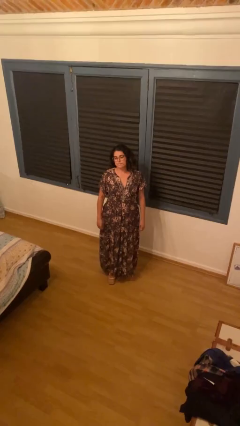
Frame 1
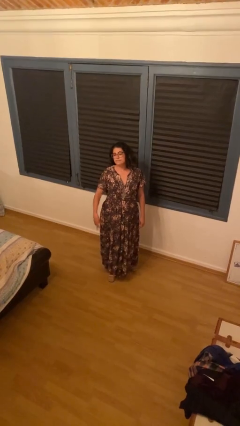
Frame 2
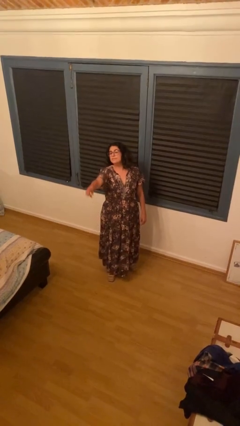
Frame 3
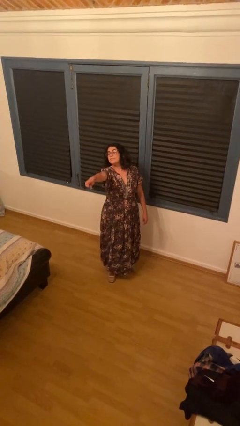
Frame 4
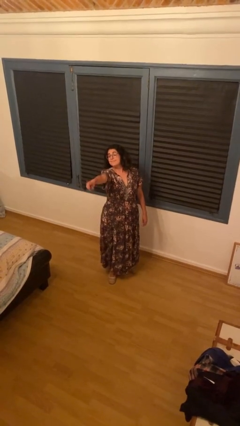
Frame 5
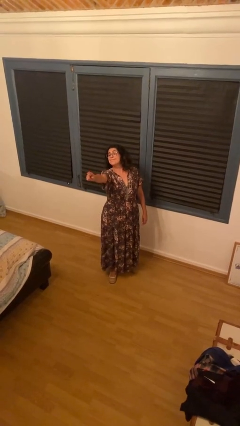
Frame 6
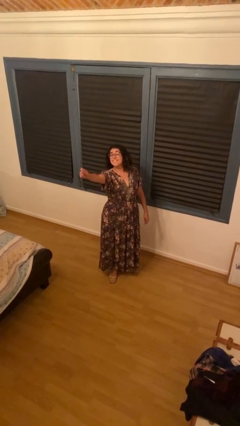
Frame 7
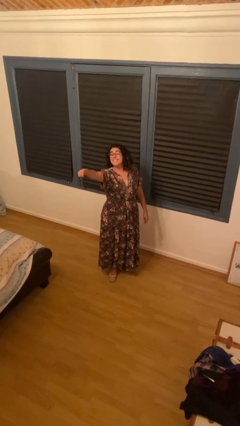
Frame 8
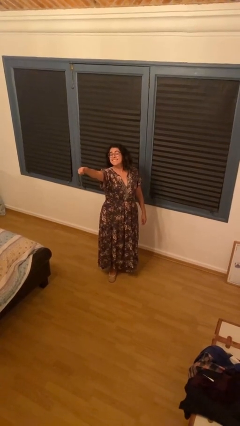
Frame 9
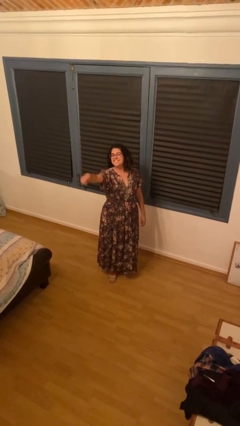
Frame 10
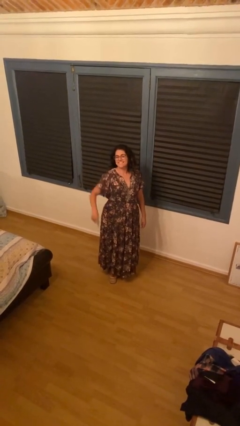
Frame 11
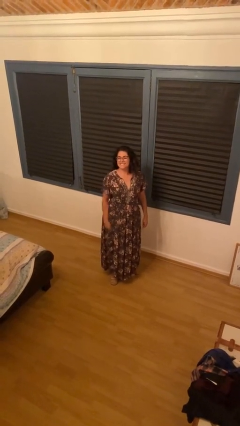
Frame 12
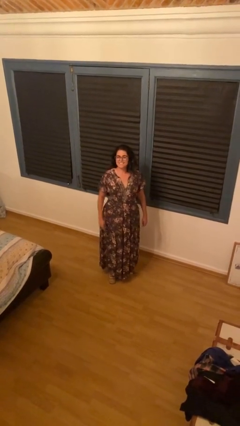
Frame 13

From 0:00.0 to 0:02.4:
person points at person

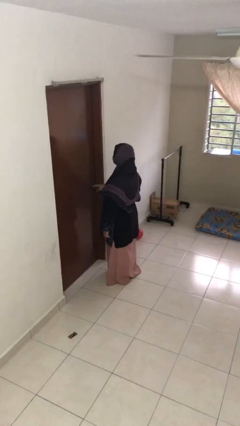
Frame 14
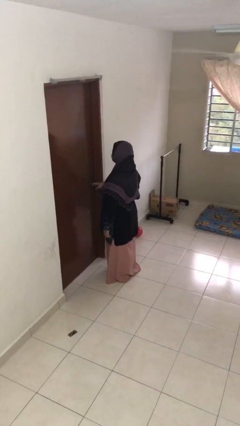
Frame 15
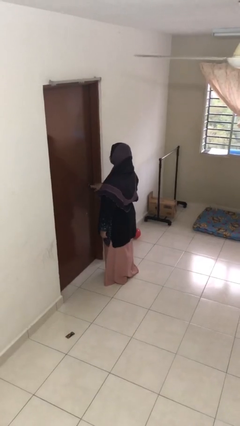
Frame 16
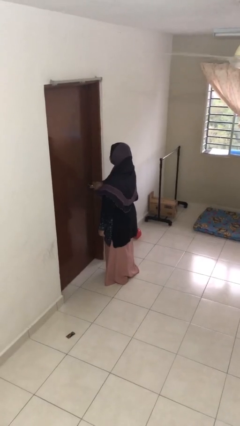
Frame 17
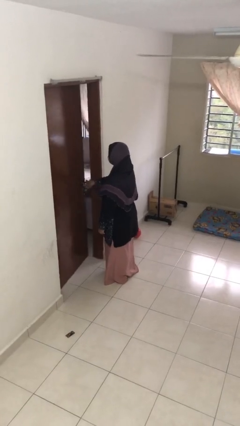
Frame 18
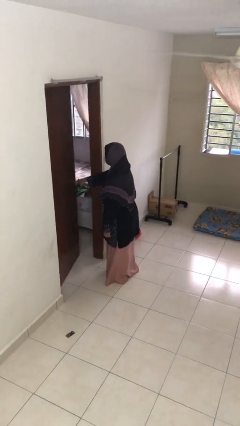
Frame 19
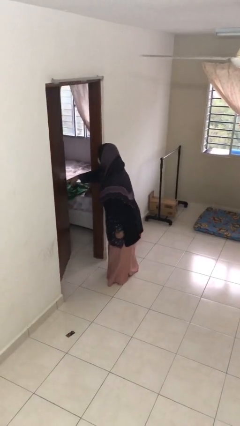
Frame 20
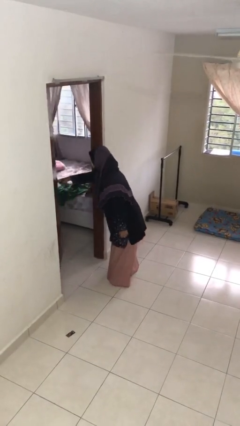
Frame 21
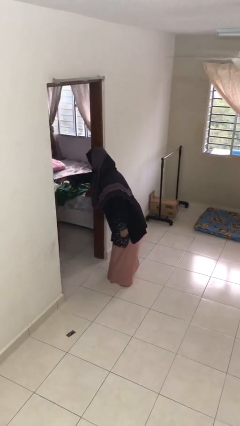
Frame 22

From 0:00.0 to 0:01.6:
person opens facility door

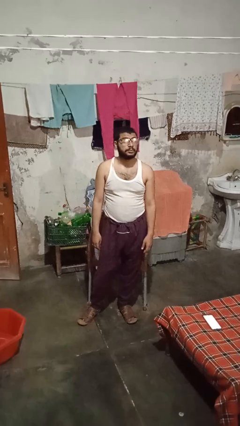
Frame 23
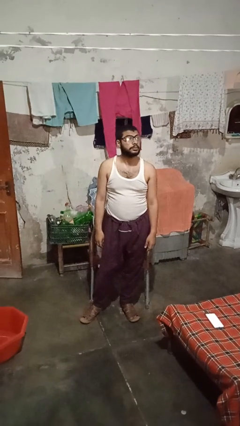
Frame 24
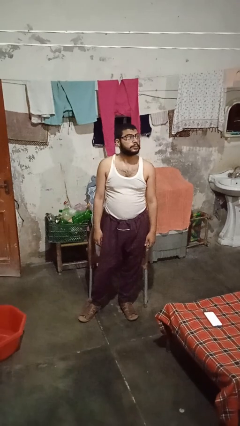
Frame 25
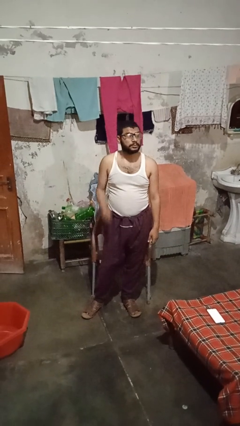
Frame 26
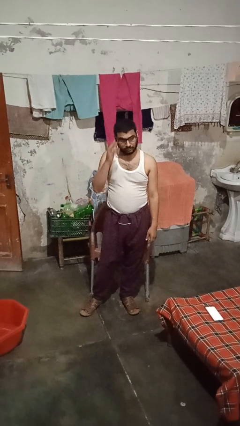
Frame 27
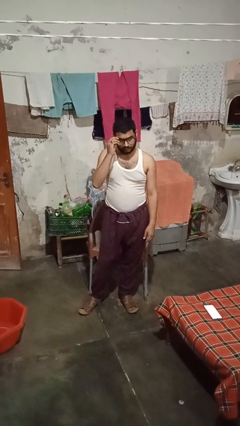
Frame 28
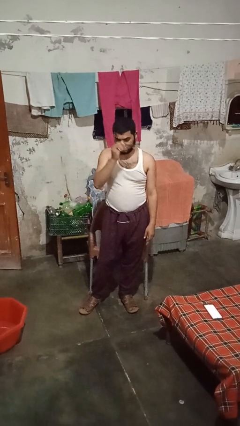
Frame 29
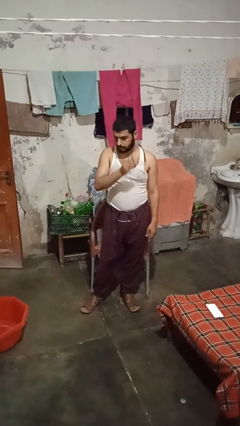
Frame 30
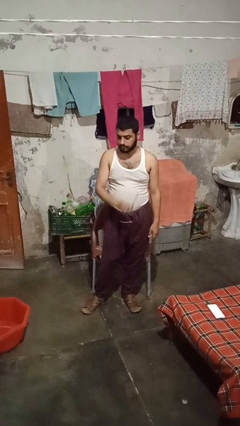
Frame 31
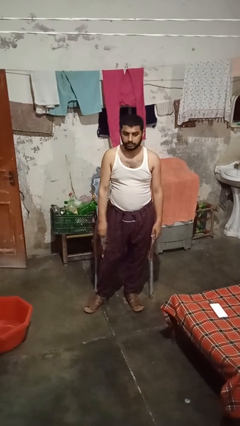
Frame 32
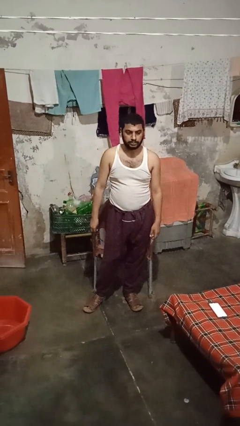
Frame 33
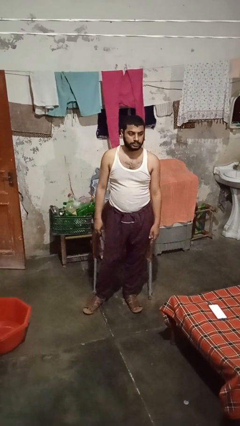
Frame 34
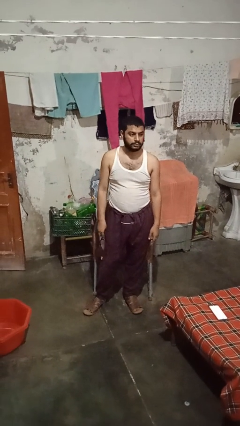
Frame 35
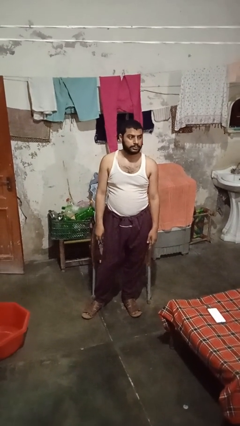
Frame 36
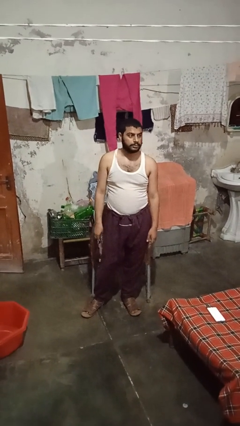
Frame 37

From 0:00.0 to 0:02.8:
person takes off glasses

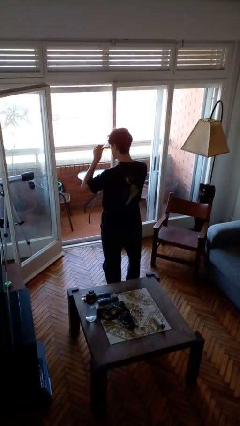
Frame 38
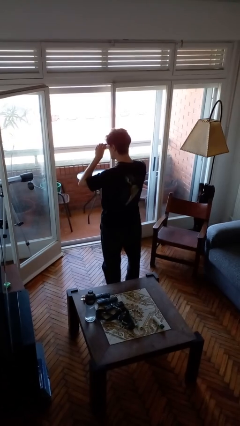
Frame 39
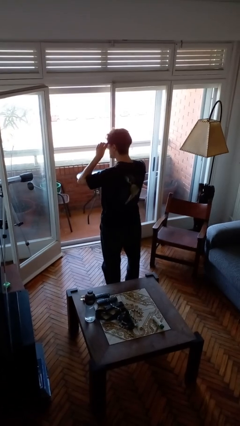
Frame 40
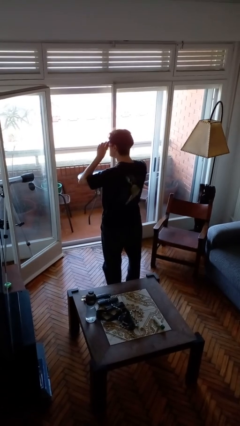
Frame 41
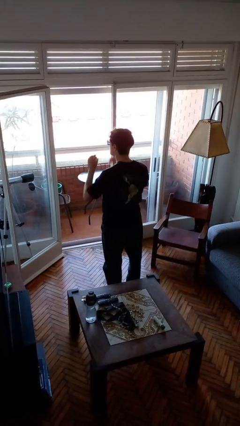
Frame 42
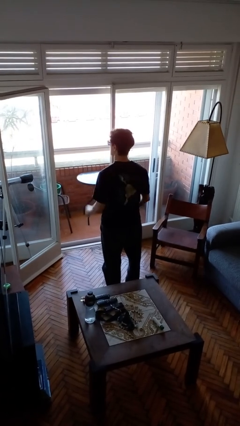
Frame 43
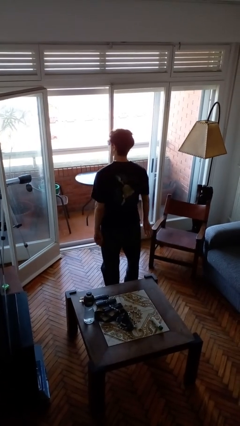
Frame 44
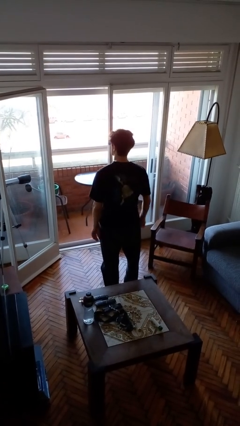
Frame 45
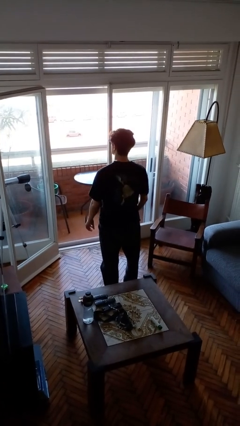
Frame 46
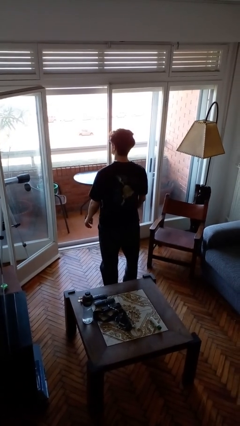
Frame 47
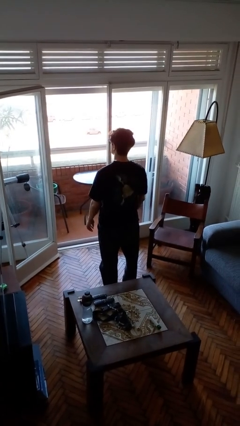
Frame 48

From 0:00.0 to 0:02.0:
person puts on sunglasses

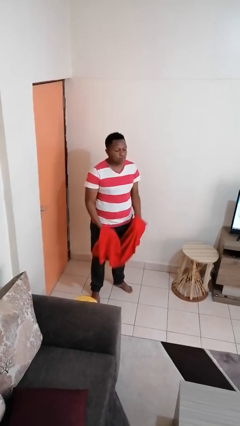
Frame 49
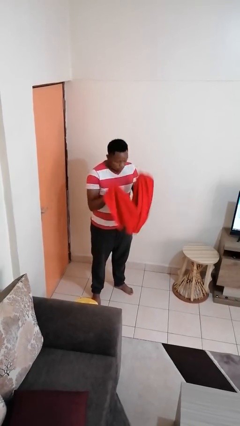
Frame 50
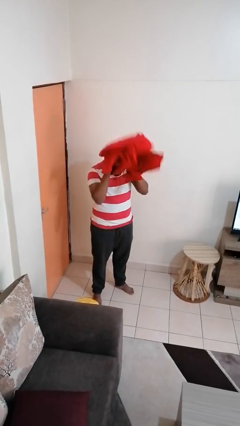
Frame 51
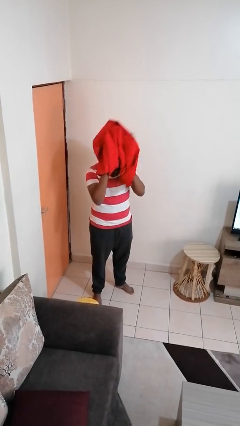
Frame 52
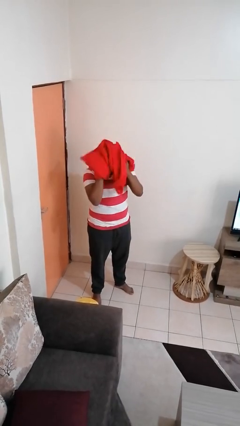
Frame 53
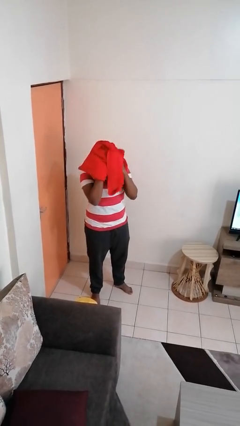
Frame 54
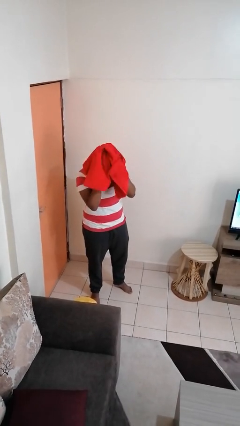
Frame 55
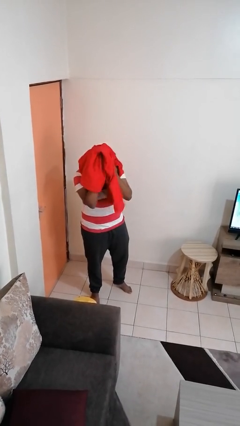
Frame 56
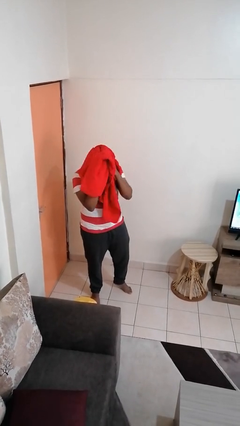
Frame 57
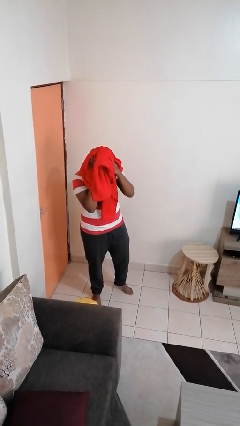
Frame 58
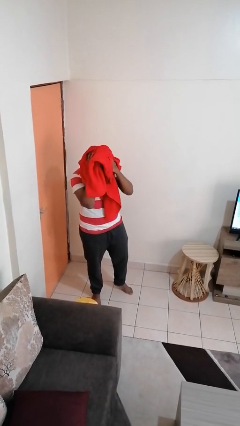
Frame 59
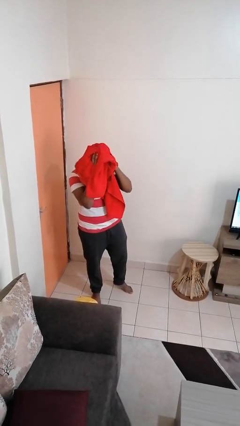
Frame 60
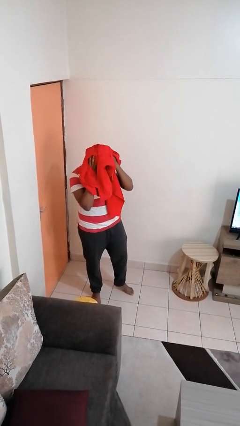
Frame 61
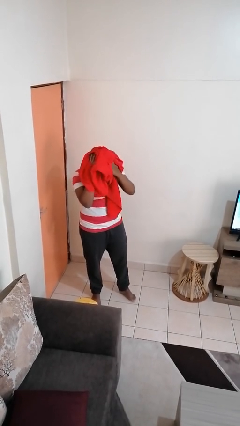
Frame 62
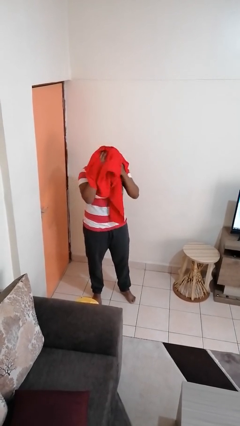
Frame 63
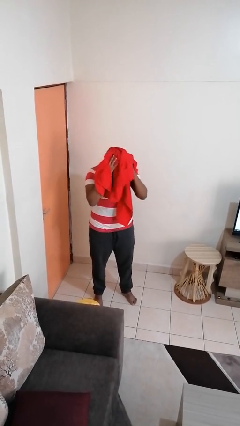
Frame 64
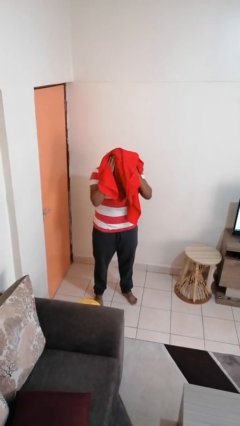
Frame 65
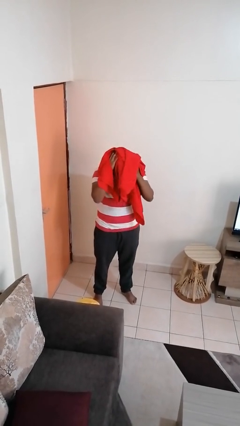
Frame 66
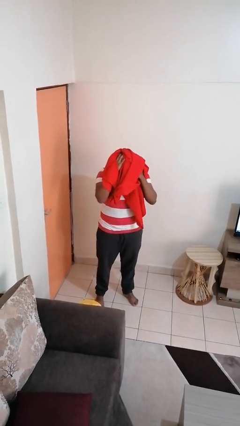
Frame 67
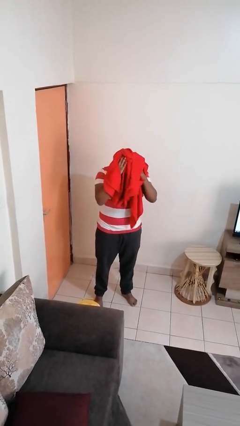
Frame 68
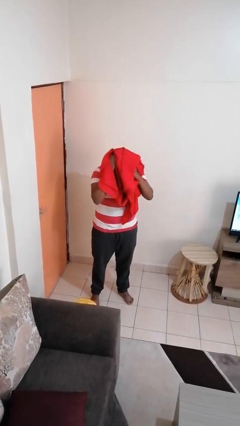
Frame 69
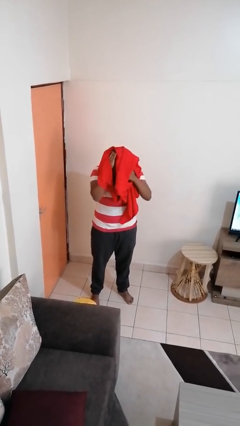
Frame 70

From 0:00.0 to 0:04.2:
person dries hair with towel

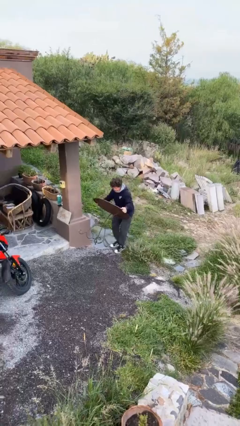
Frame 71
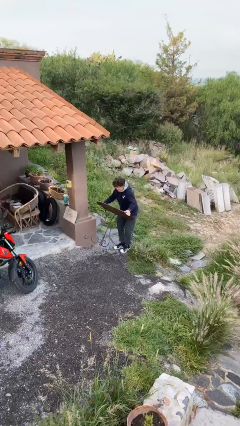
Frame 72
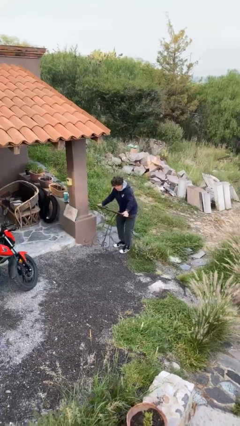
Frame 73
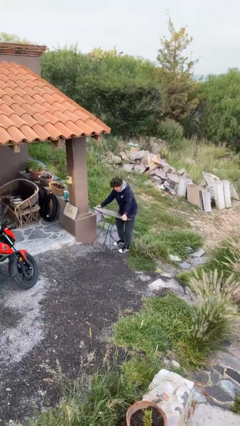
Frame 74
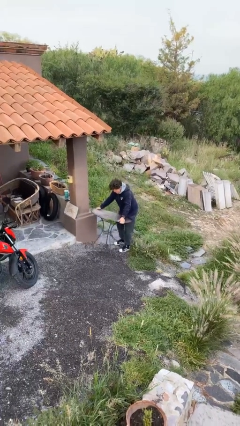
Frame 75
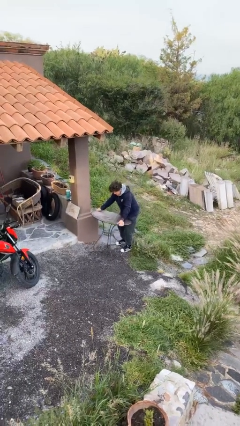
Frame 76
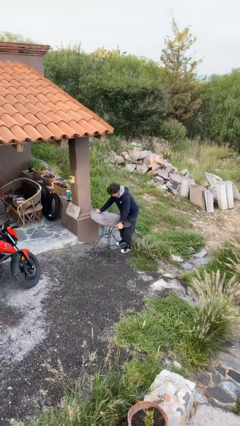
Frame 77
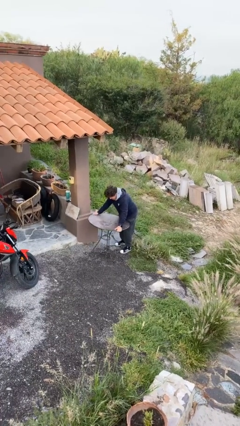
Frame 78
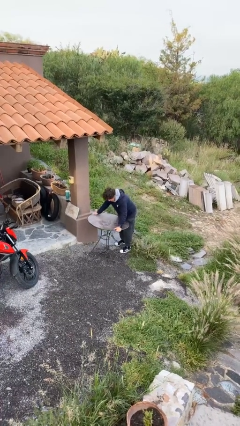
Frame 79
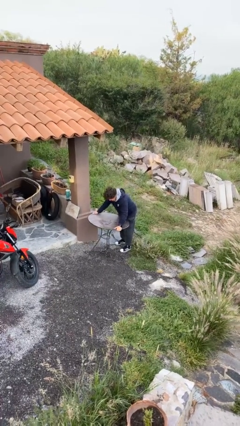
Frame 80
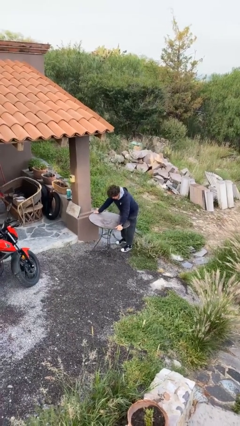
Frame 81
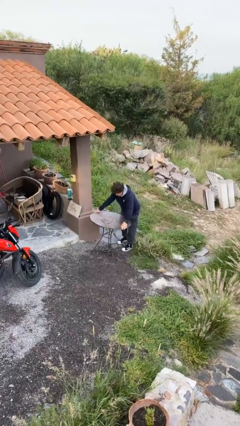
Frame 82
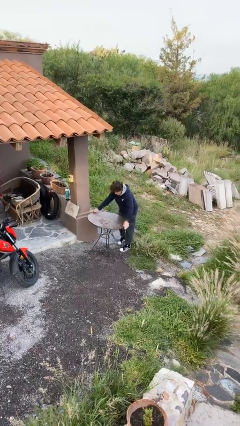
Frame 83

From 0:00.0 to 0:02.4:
person puts down object on floor

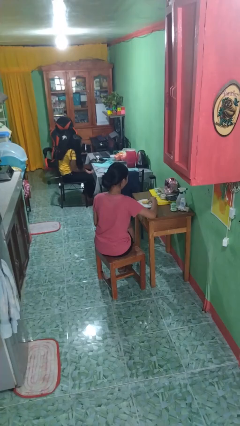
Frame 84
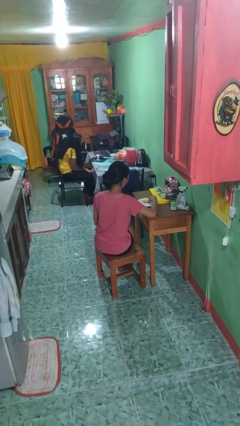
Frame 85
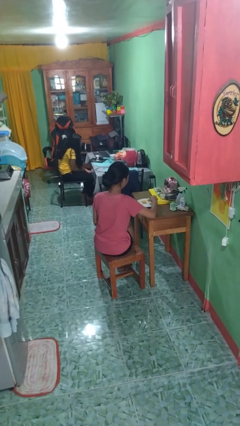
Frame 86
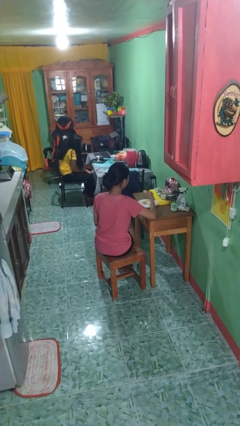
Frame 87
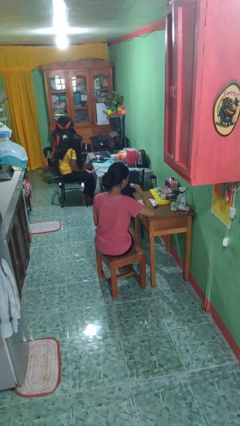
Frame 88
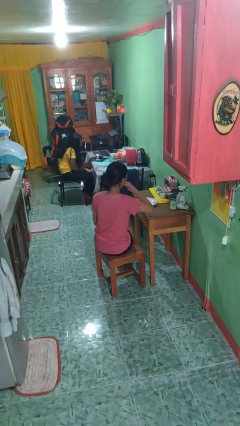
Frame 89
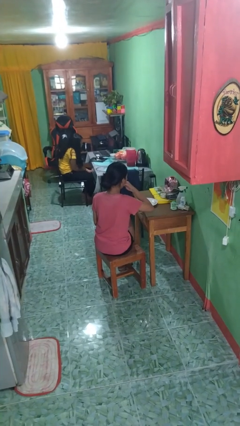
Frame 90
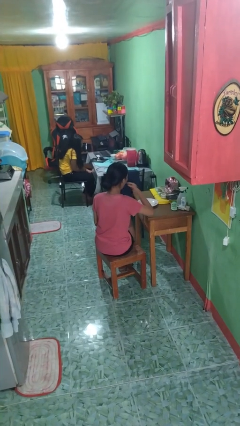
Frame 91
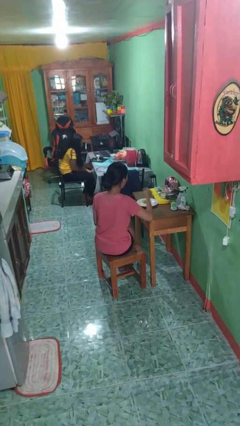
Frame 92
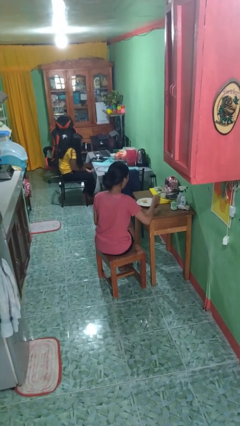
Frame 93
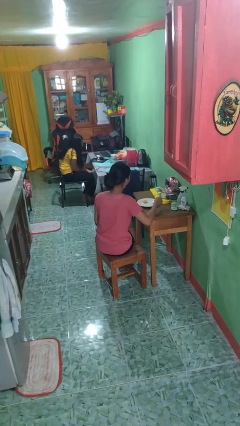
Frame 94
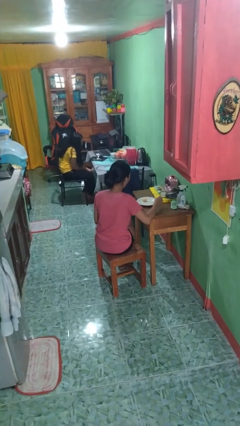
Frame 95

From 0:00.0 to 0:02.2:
person eats with hands
